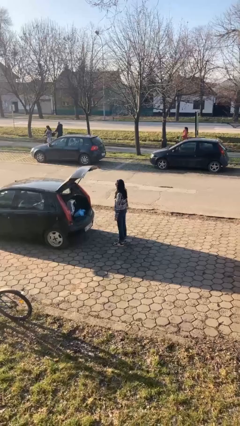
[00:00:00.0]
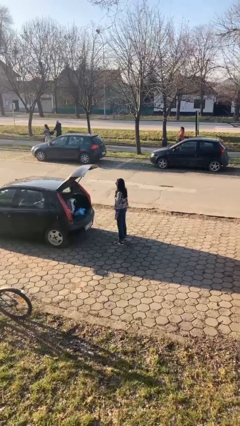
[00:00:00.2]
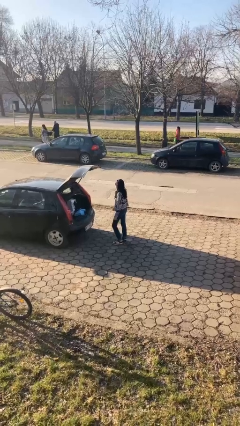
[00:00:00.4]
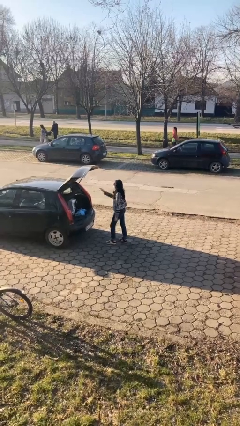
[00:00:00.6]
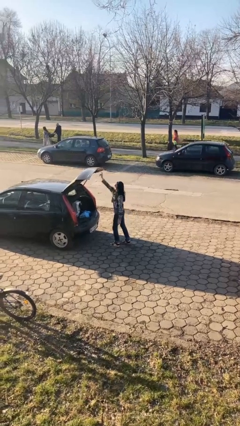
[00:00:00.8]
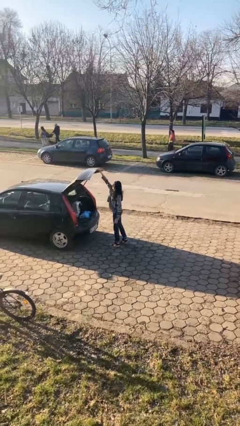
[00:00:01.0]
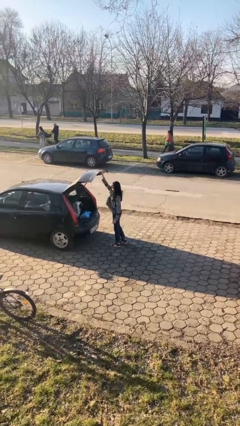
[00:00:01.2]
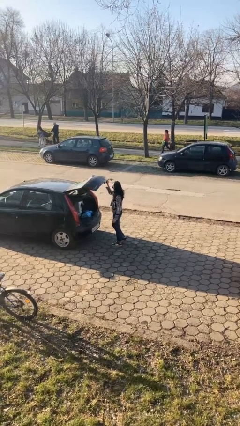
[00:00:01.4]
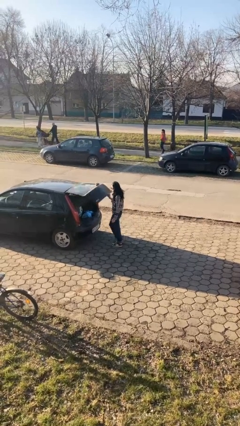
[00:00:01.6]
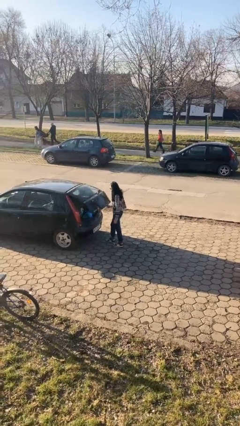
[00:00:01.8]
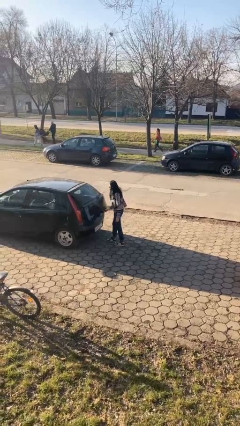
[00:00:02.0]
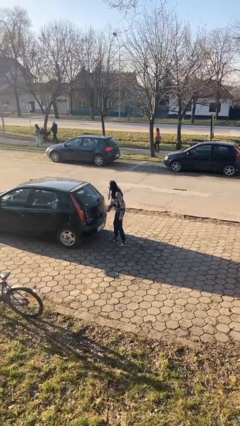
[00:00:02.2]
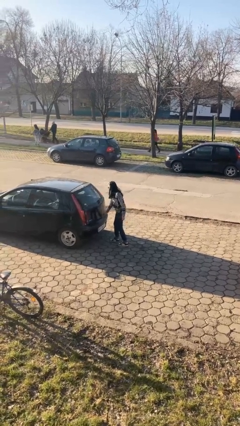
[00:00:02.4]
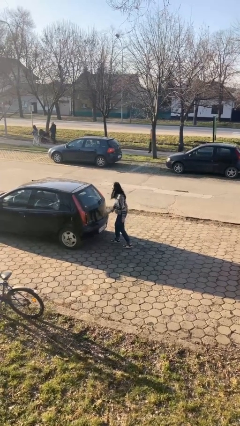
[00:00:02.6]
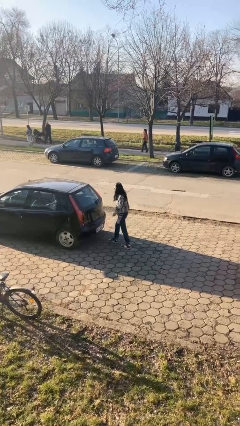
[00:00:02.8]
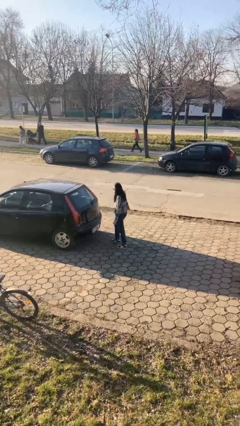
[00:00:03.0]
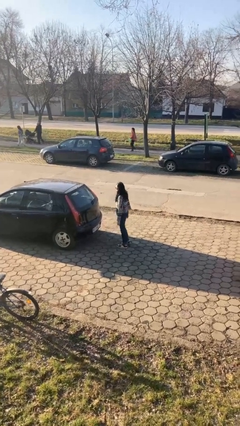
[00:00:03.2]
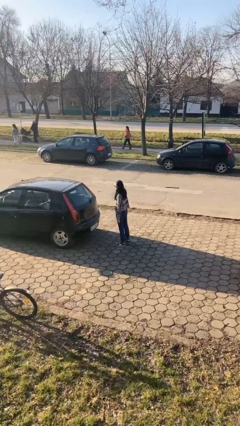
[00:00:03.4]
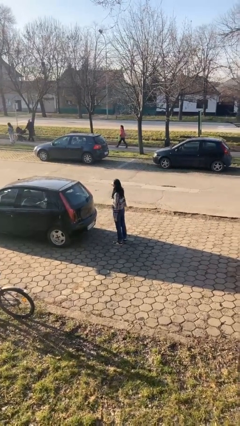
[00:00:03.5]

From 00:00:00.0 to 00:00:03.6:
person closes car trunk

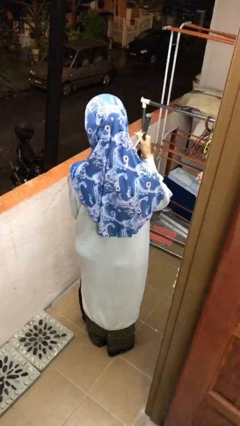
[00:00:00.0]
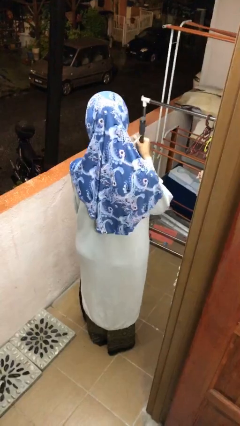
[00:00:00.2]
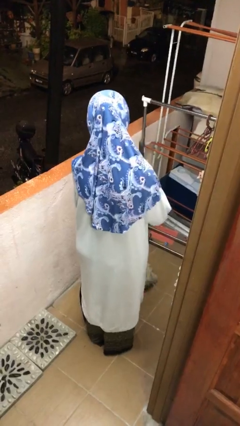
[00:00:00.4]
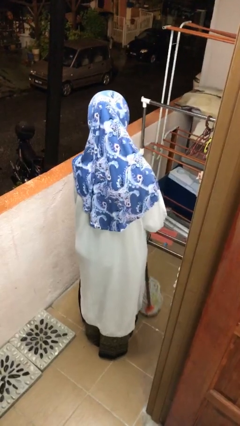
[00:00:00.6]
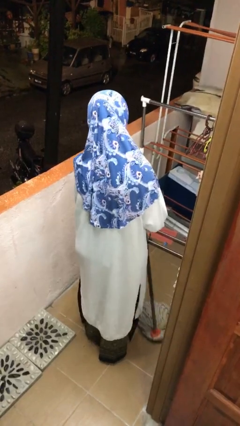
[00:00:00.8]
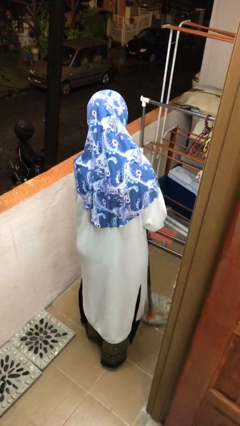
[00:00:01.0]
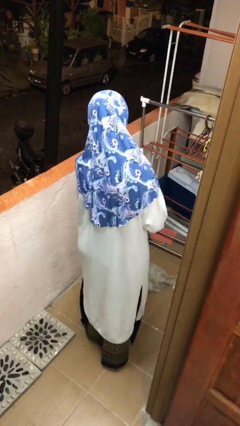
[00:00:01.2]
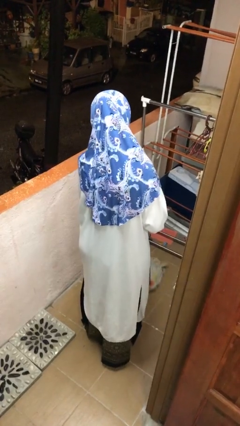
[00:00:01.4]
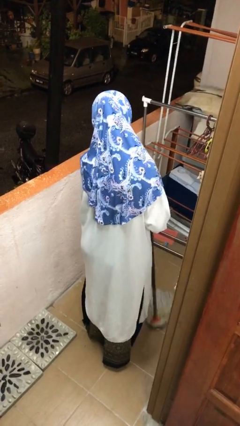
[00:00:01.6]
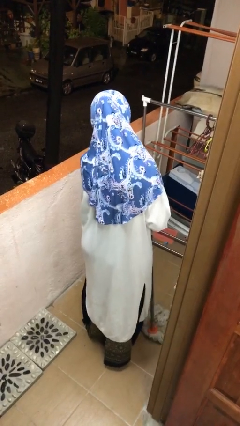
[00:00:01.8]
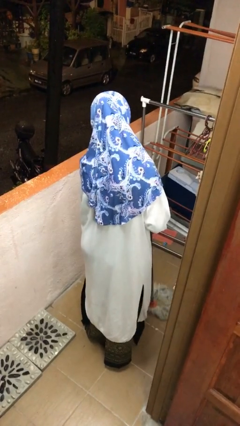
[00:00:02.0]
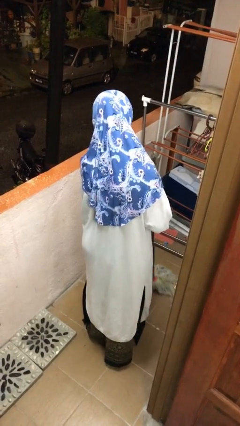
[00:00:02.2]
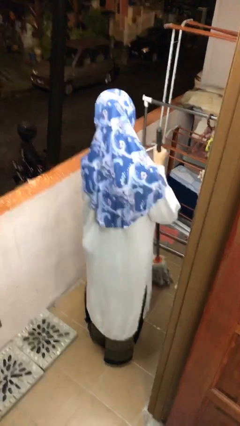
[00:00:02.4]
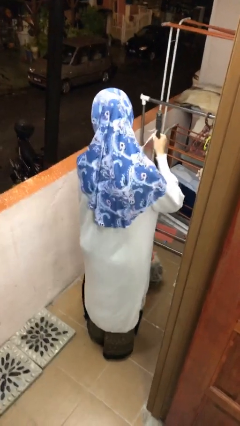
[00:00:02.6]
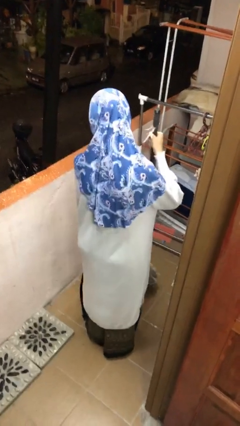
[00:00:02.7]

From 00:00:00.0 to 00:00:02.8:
person mops

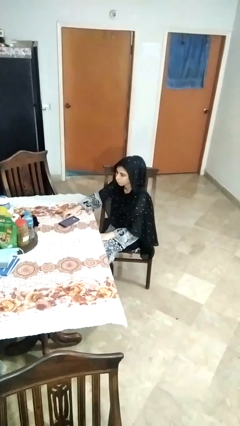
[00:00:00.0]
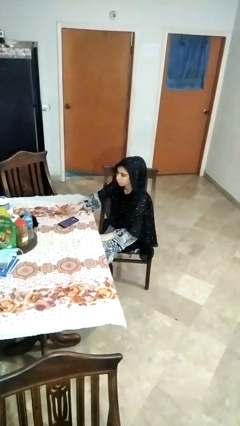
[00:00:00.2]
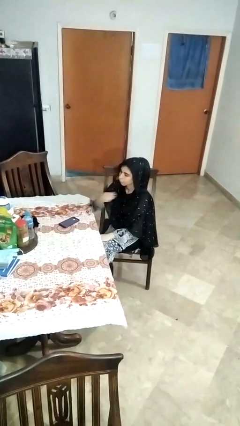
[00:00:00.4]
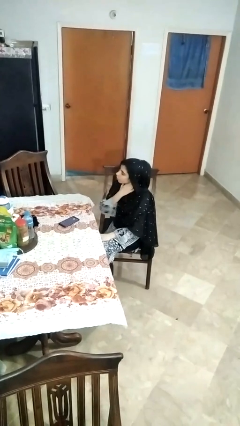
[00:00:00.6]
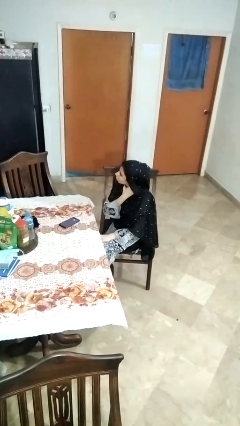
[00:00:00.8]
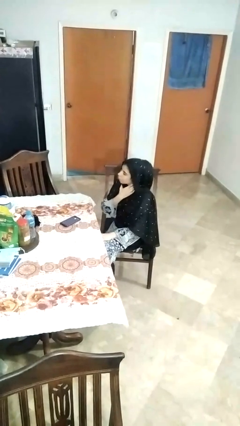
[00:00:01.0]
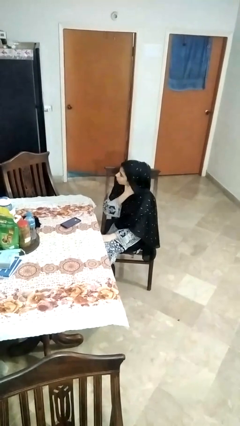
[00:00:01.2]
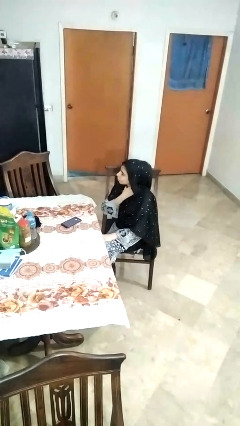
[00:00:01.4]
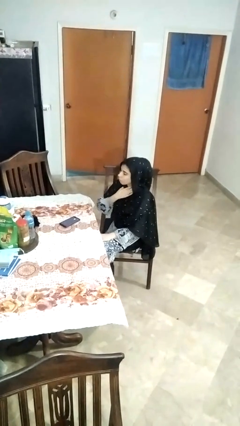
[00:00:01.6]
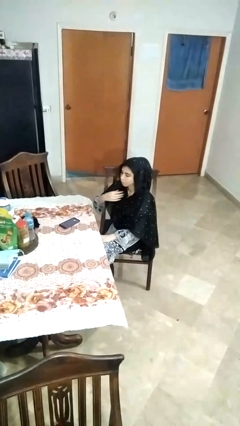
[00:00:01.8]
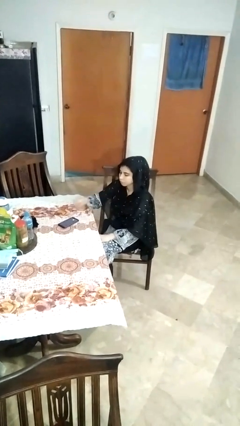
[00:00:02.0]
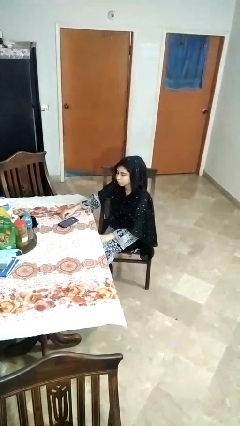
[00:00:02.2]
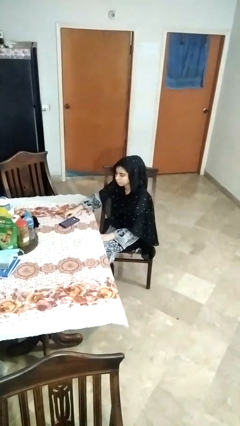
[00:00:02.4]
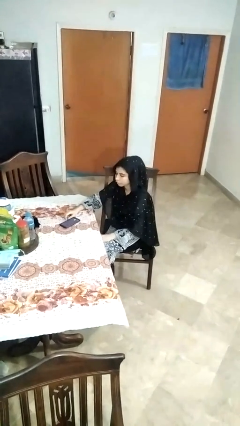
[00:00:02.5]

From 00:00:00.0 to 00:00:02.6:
person rubs neck

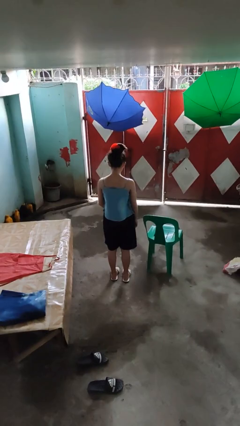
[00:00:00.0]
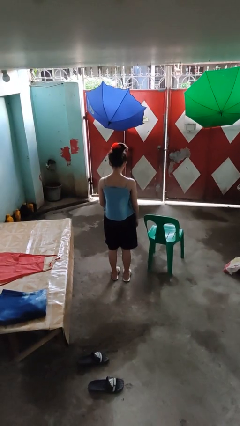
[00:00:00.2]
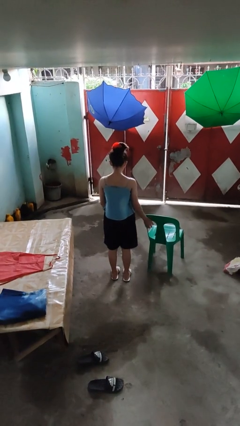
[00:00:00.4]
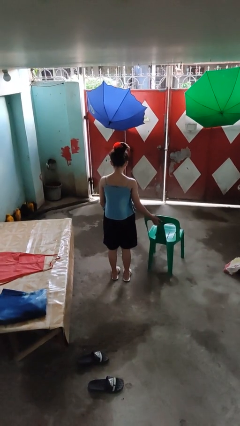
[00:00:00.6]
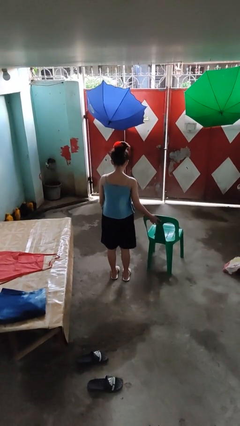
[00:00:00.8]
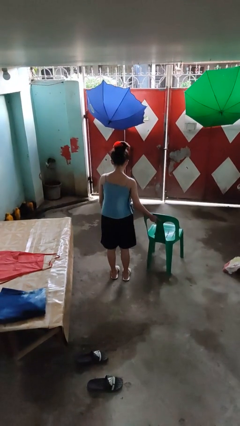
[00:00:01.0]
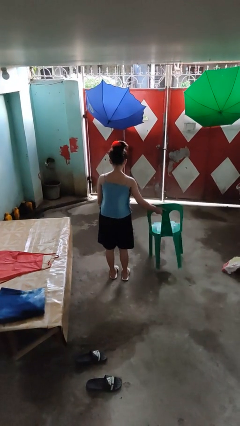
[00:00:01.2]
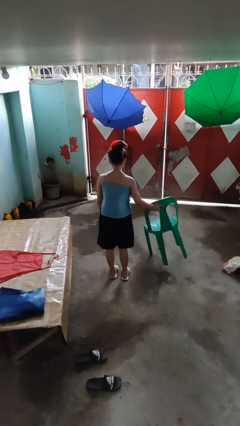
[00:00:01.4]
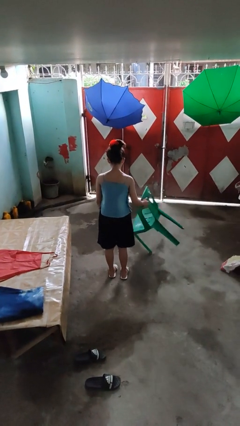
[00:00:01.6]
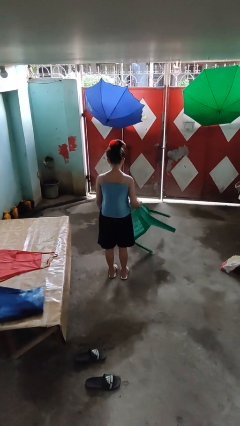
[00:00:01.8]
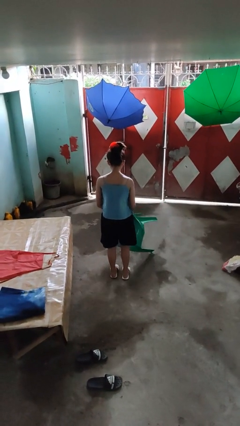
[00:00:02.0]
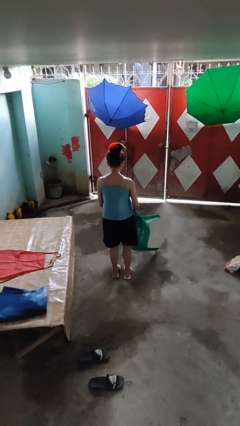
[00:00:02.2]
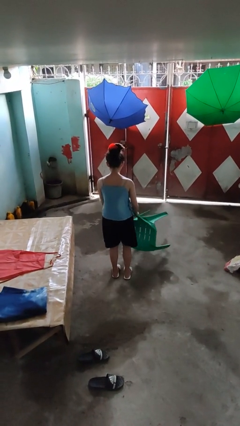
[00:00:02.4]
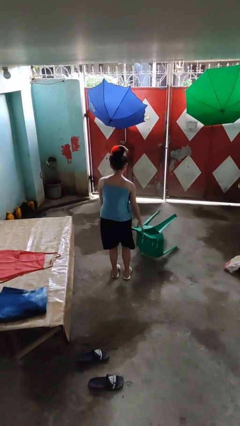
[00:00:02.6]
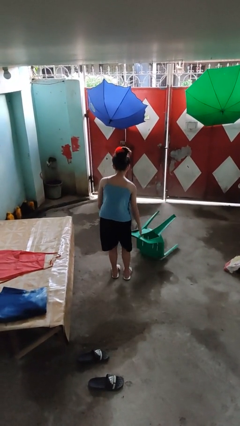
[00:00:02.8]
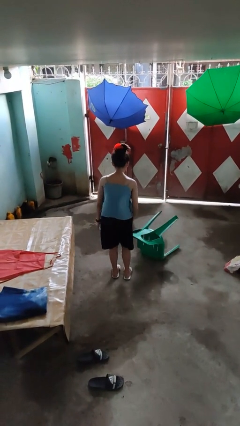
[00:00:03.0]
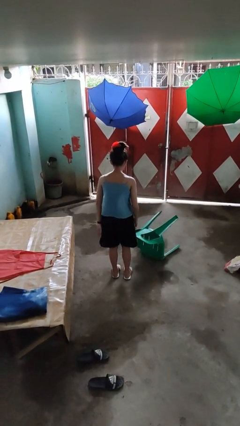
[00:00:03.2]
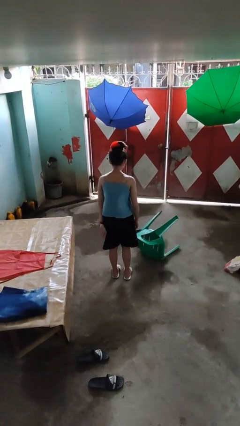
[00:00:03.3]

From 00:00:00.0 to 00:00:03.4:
person knocks over furniture

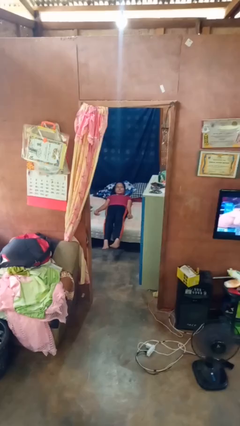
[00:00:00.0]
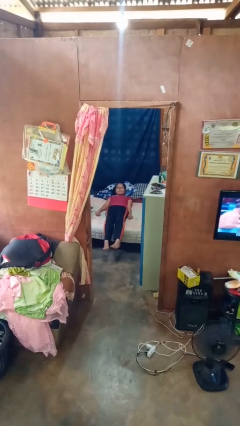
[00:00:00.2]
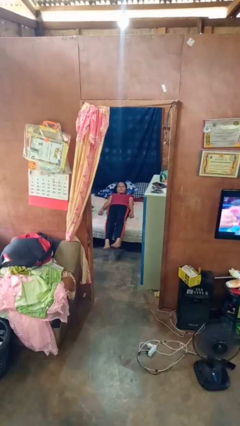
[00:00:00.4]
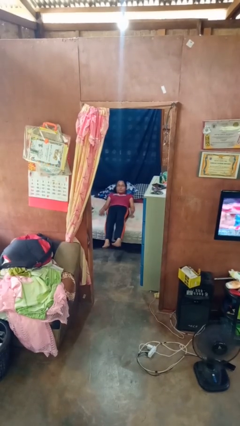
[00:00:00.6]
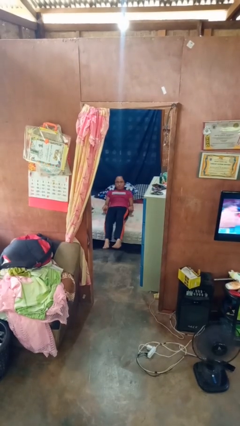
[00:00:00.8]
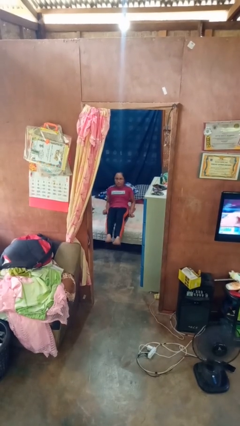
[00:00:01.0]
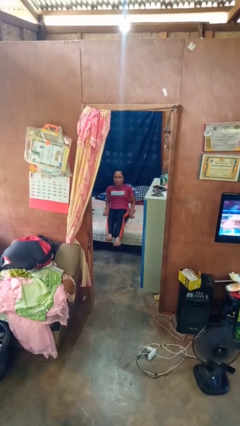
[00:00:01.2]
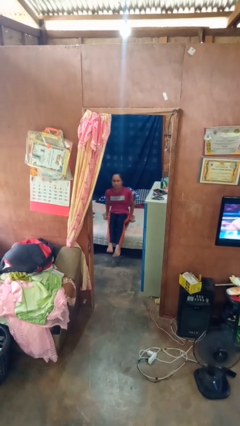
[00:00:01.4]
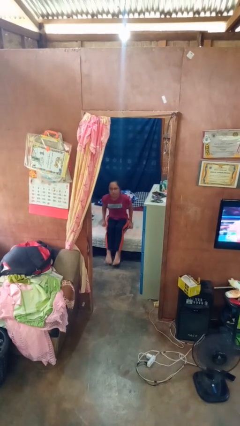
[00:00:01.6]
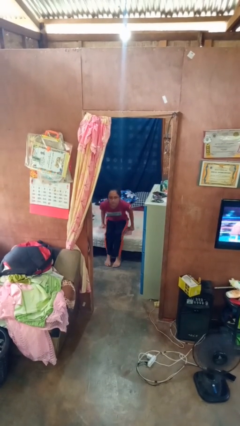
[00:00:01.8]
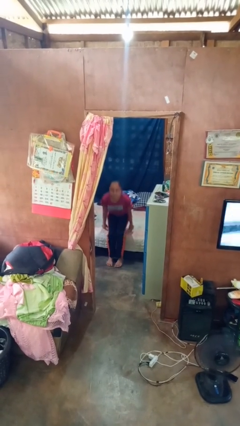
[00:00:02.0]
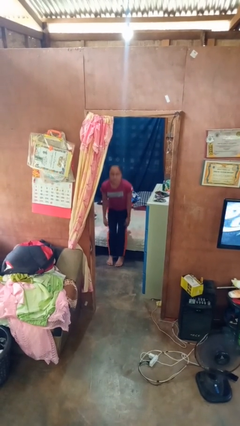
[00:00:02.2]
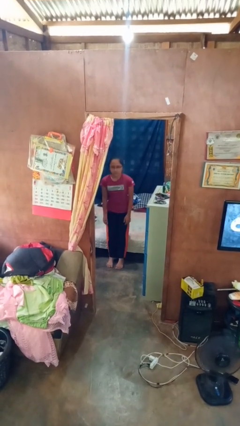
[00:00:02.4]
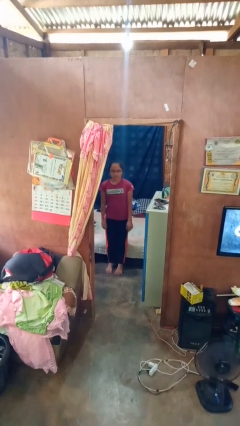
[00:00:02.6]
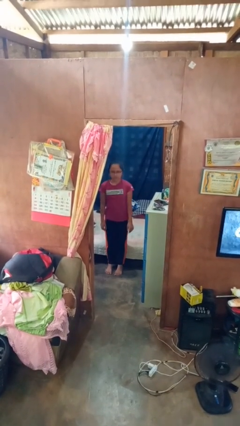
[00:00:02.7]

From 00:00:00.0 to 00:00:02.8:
person stands up

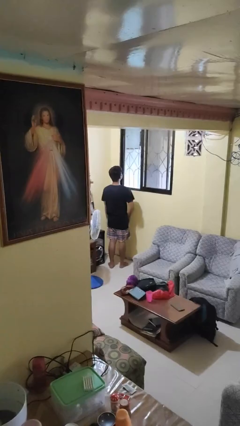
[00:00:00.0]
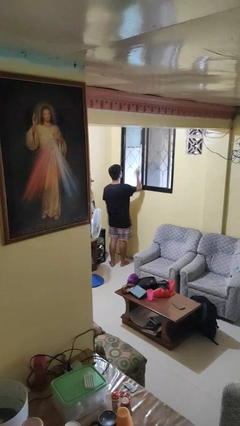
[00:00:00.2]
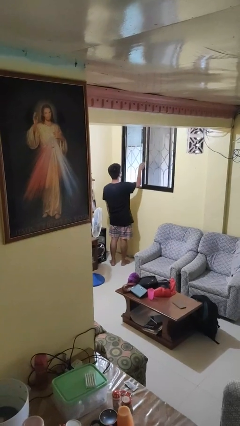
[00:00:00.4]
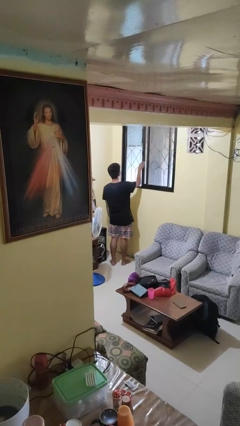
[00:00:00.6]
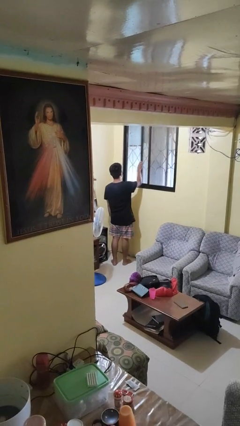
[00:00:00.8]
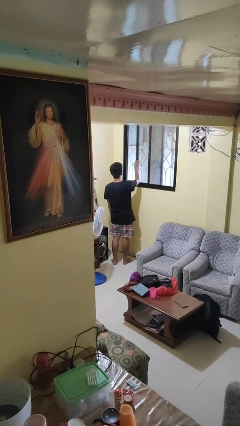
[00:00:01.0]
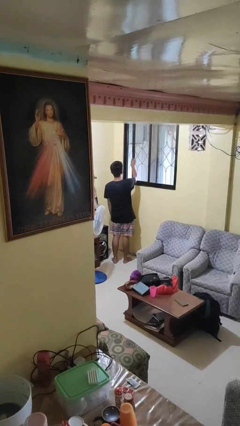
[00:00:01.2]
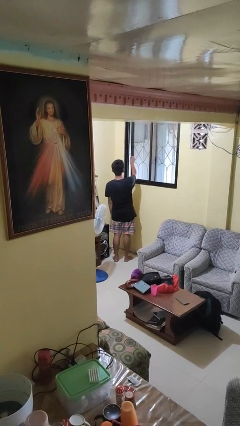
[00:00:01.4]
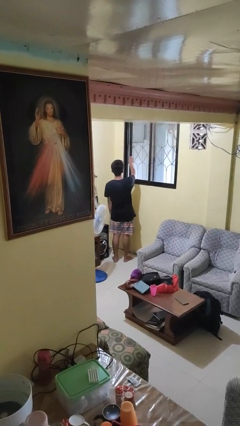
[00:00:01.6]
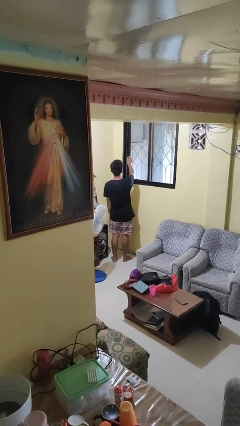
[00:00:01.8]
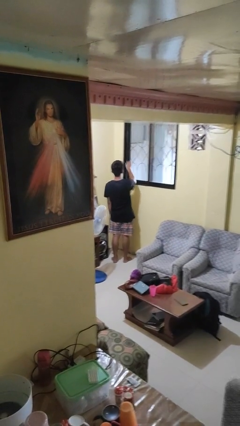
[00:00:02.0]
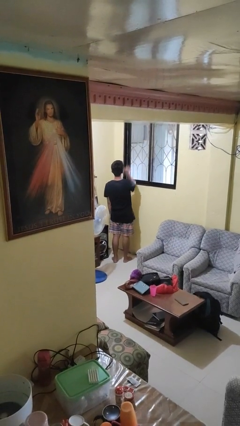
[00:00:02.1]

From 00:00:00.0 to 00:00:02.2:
person closes home window
